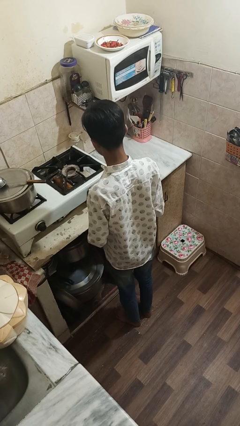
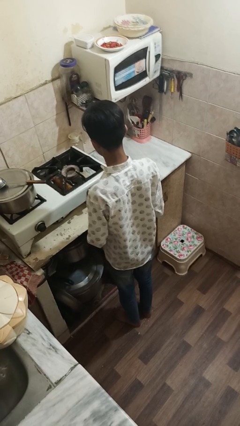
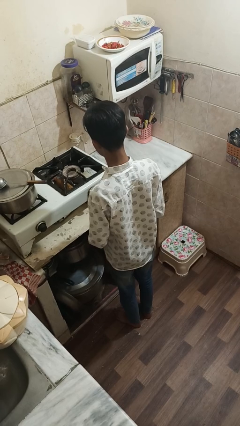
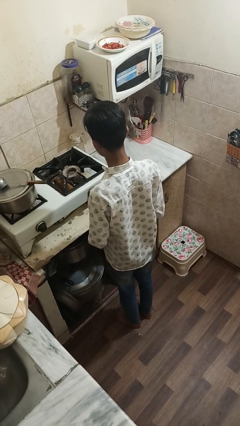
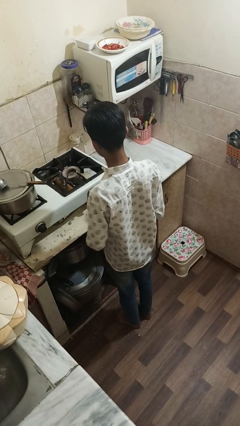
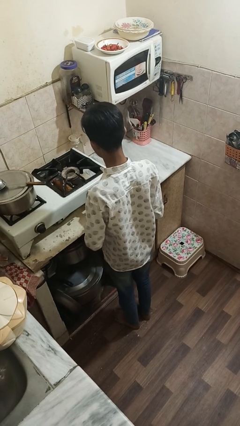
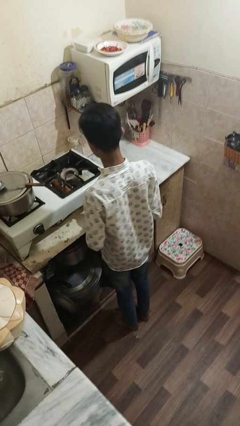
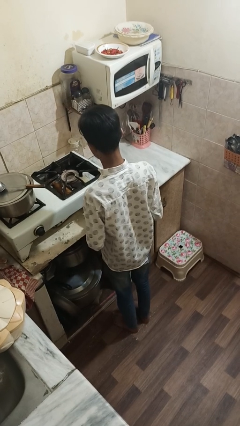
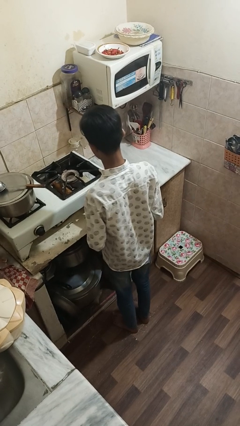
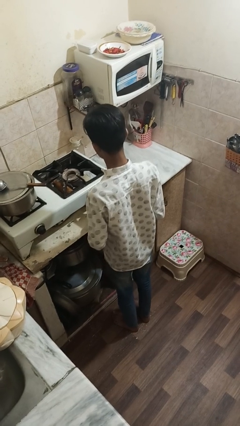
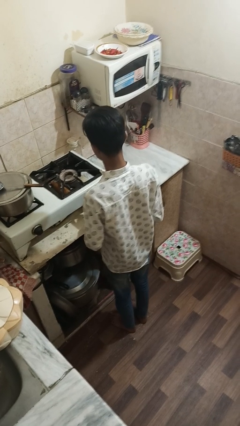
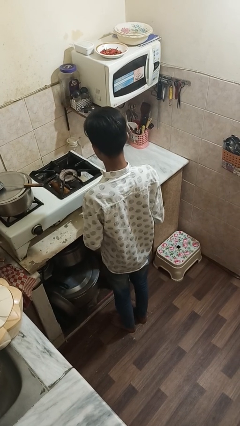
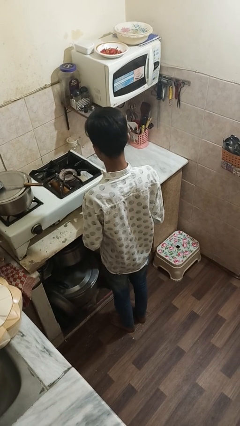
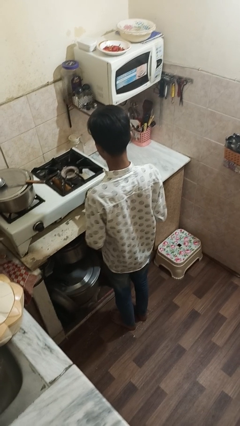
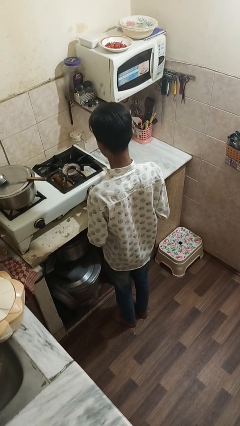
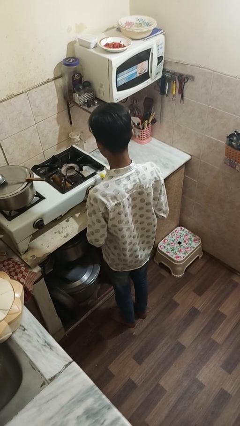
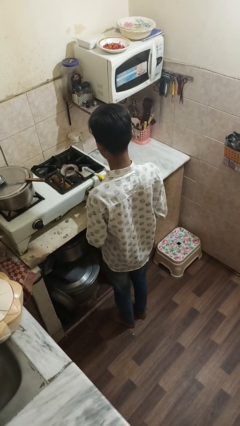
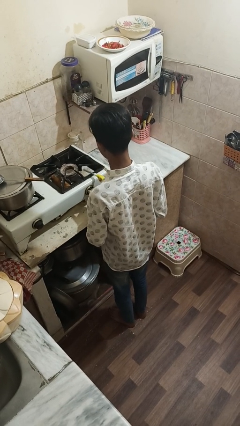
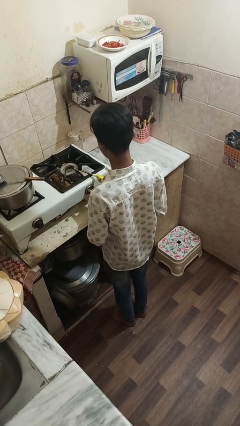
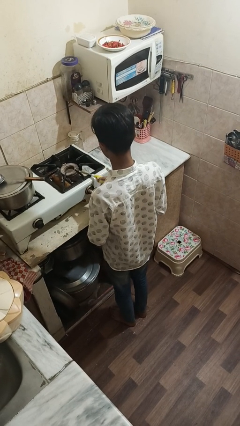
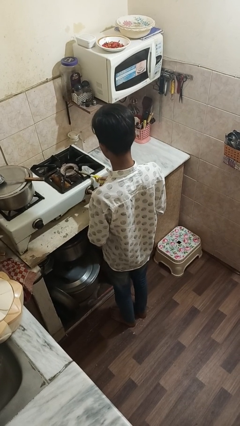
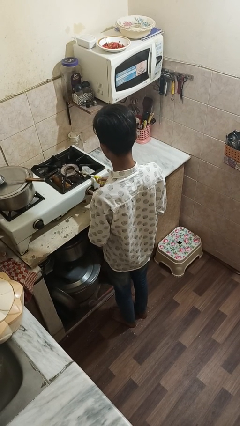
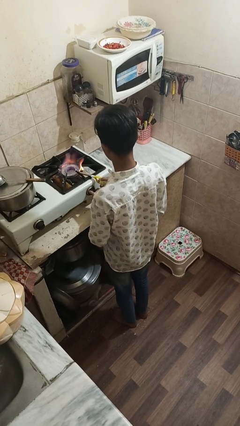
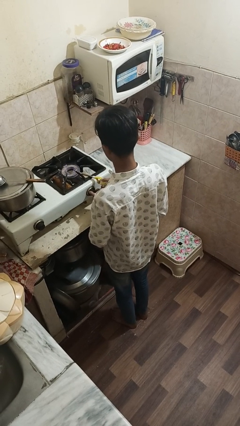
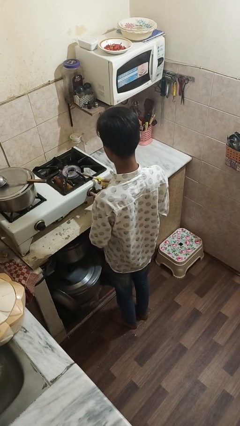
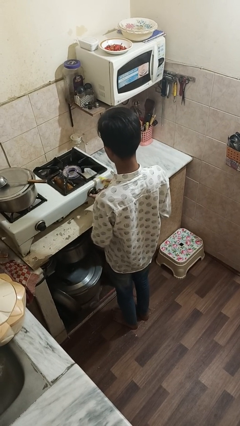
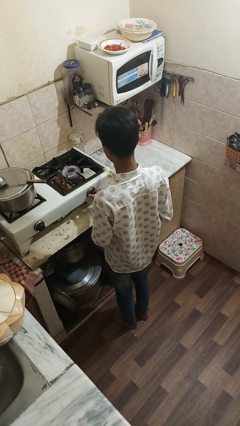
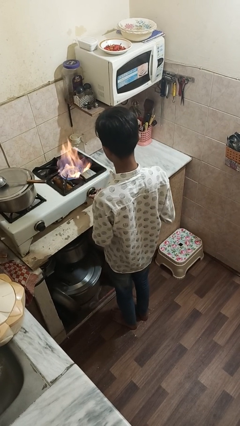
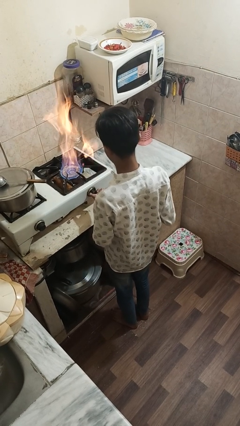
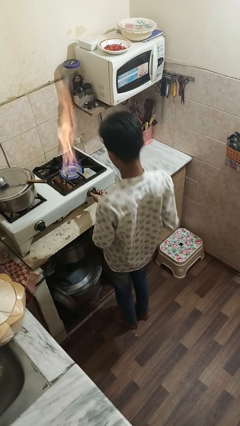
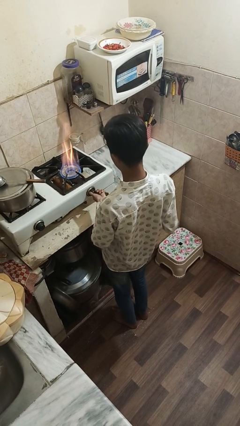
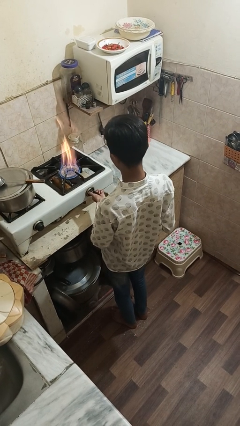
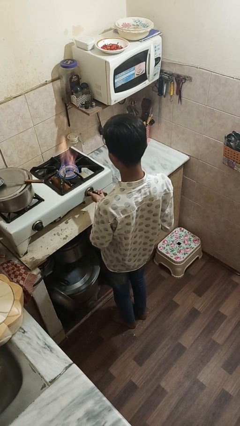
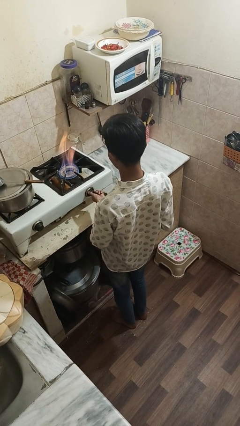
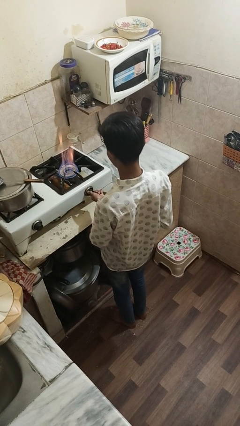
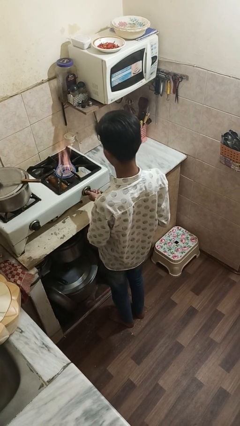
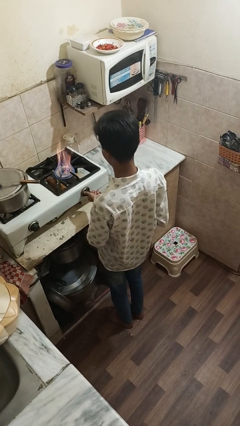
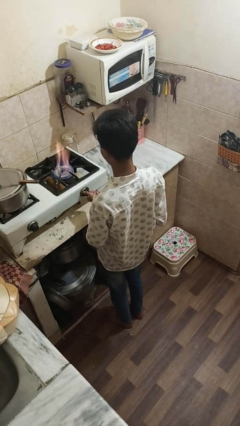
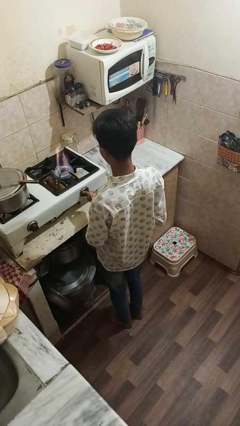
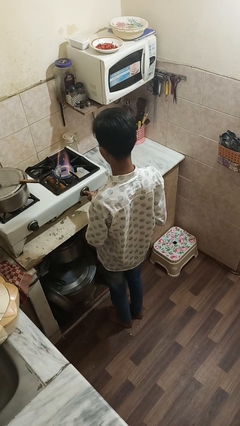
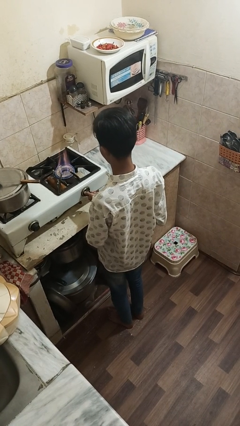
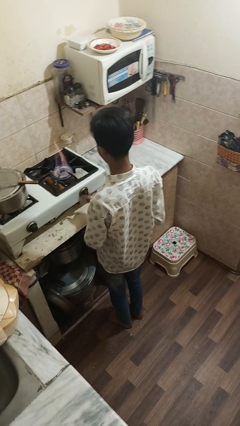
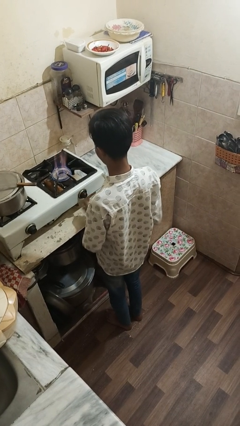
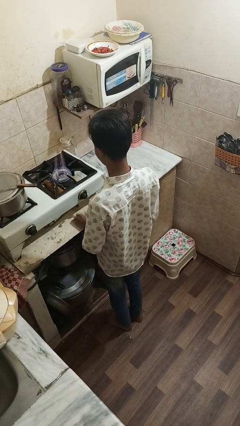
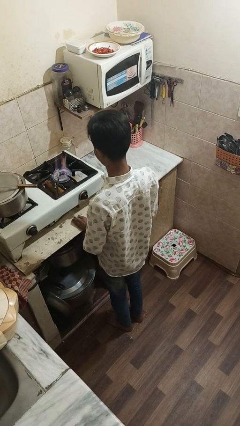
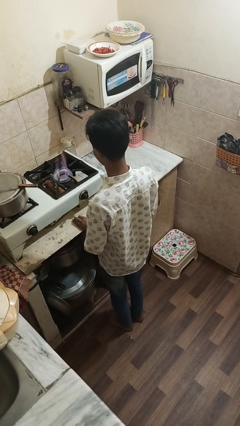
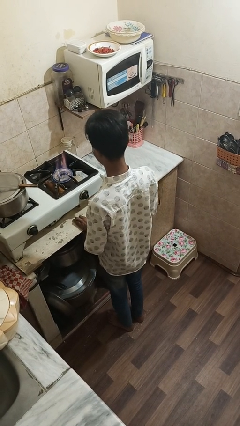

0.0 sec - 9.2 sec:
person turns on stovetop

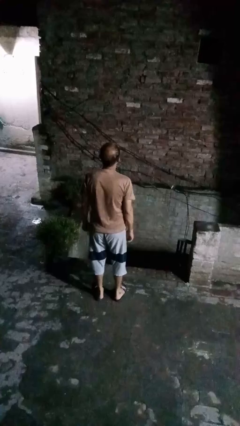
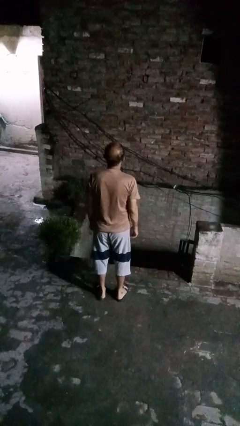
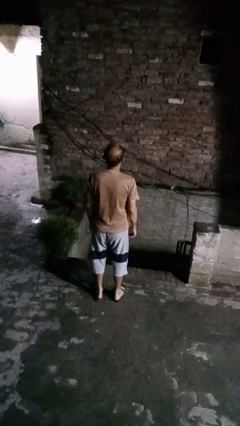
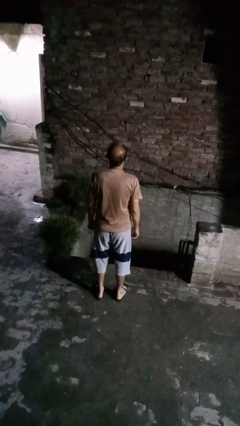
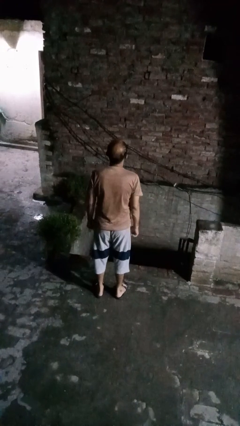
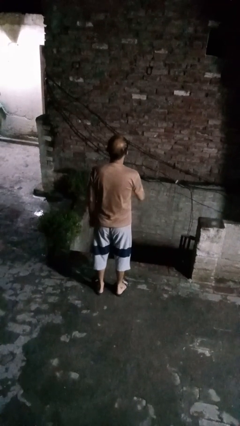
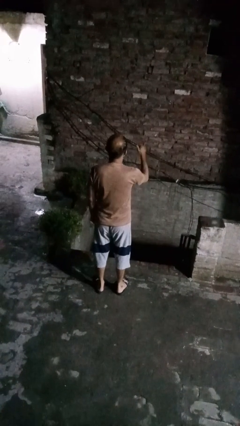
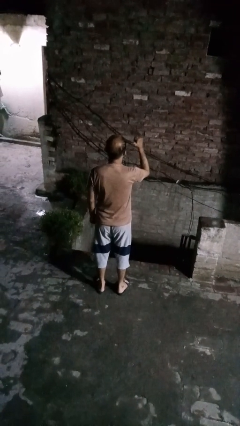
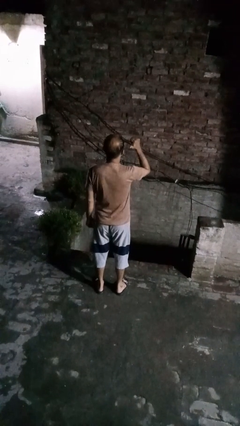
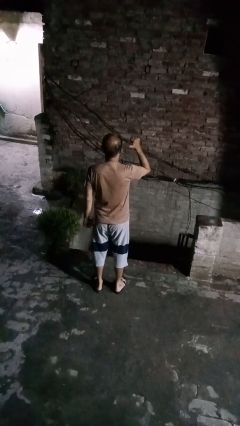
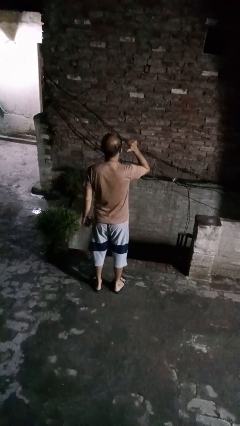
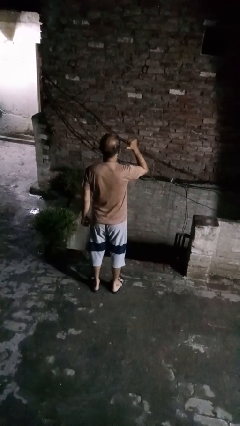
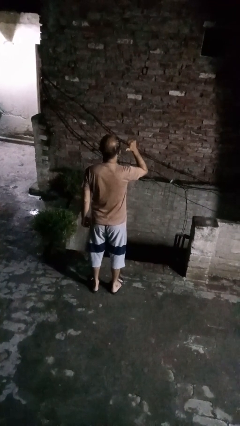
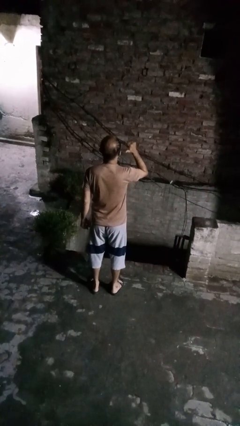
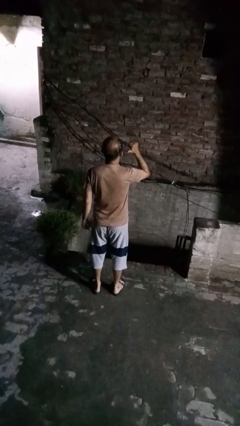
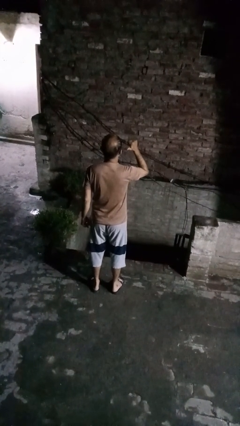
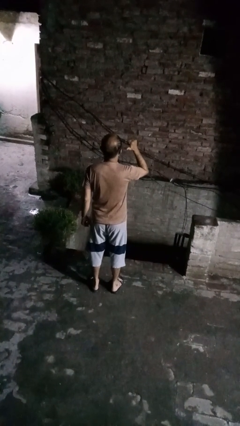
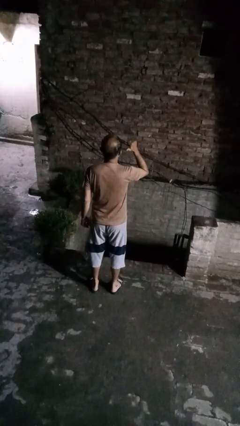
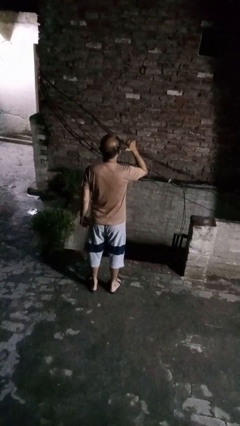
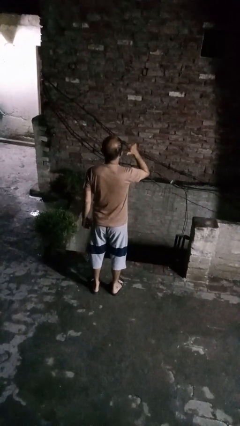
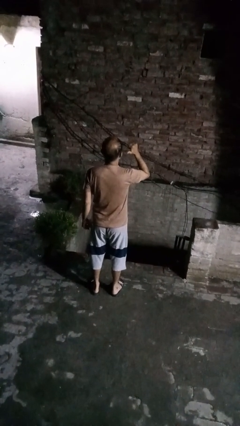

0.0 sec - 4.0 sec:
person gestures behind me

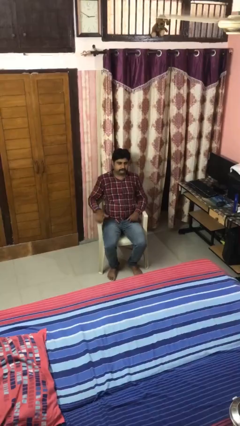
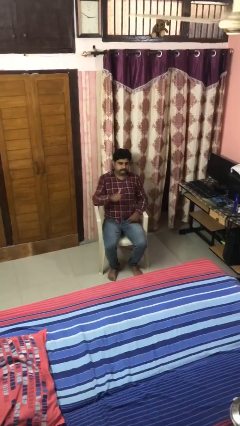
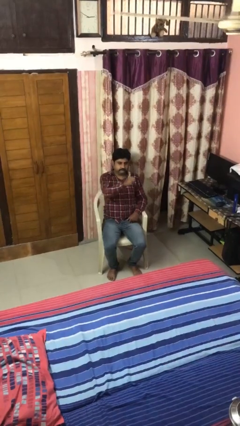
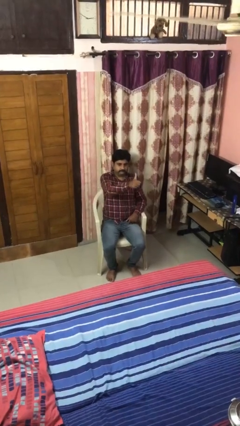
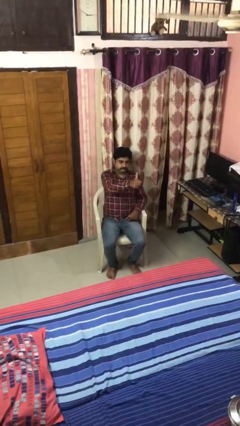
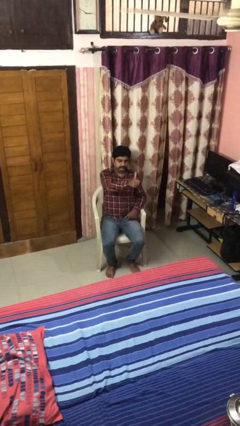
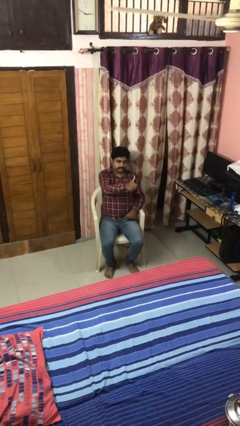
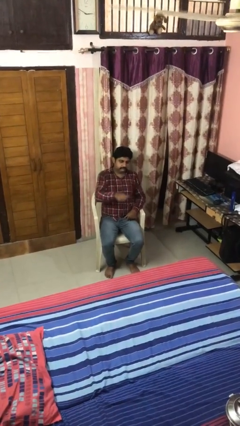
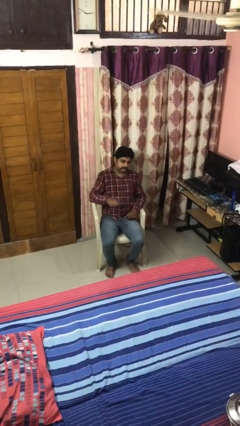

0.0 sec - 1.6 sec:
person gestures thumbs up

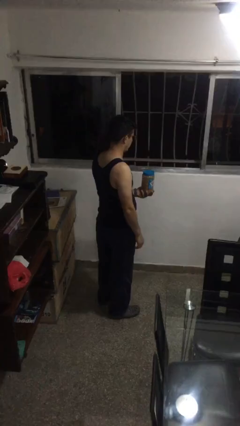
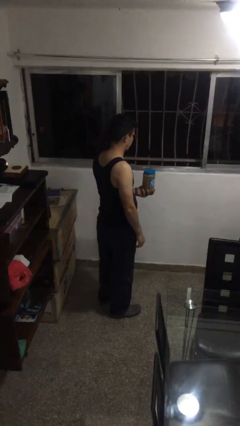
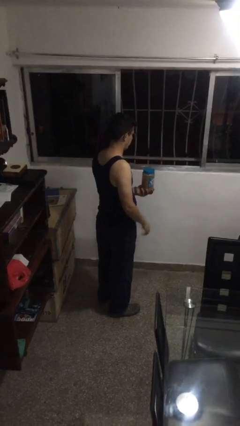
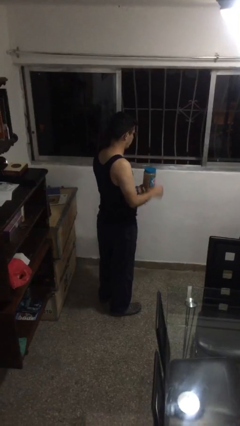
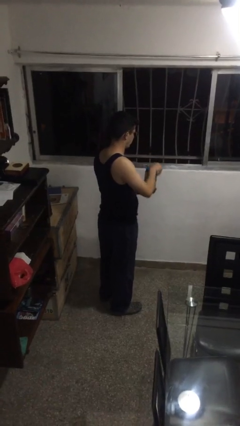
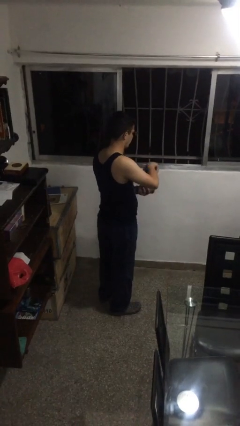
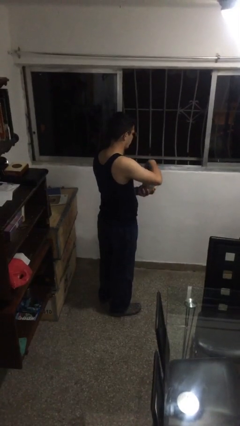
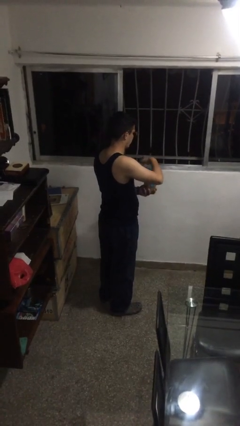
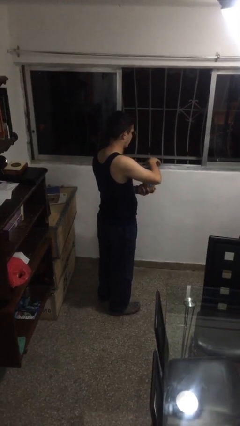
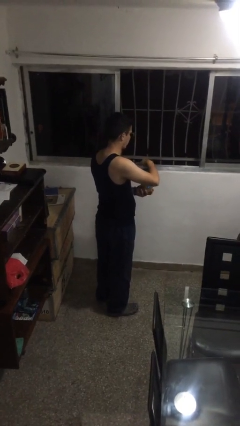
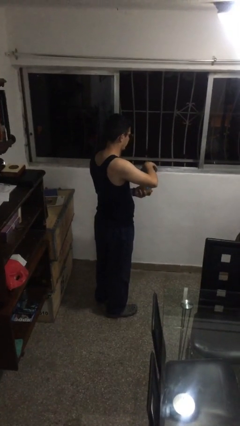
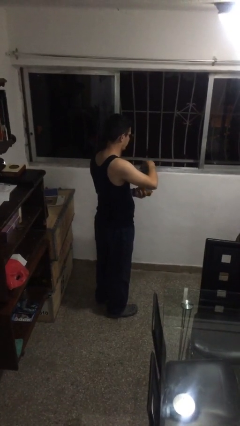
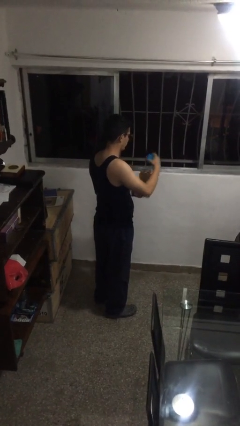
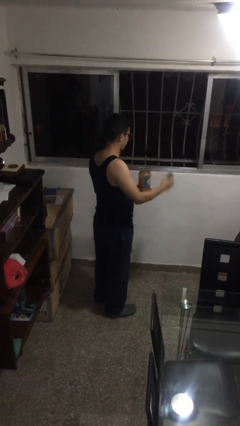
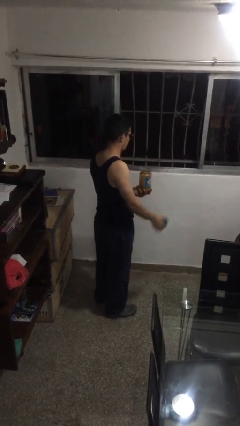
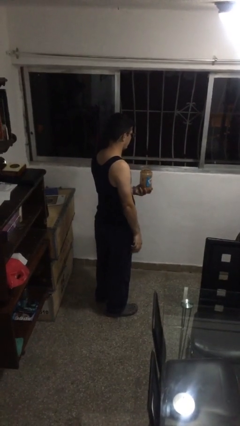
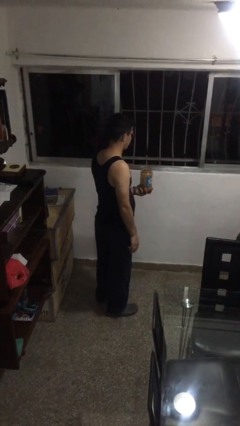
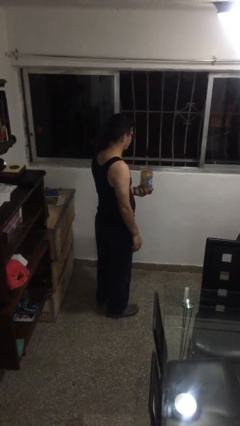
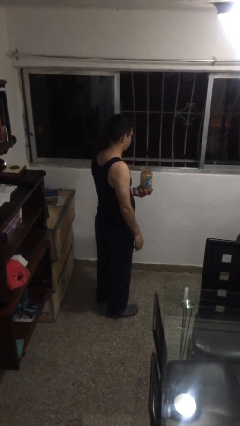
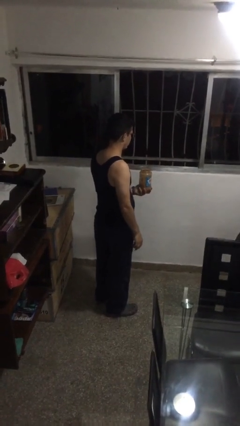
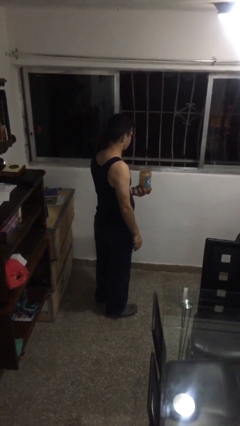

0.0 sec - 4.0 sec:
person opens jar
